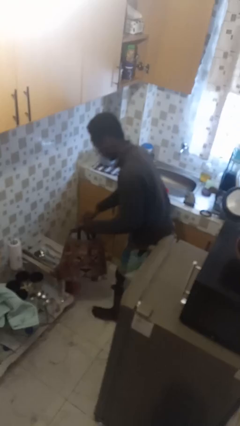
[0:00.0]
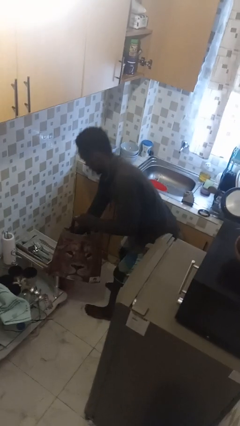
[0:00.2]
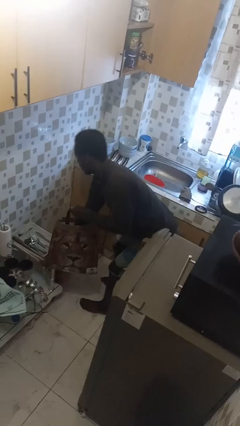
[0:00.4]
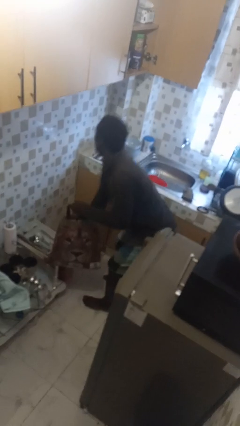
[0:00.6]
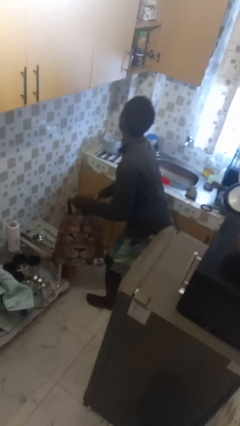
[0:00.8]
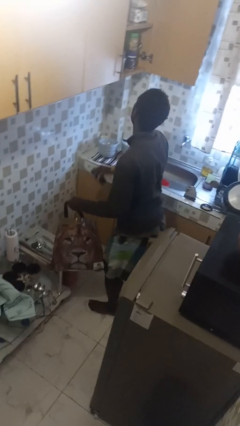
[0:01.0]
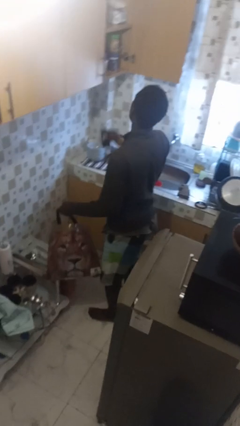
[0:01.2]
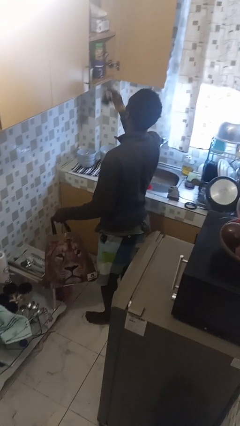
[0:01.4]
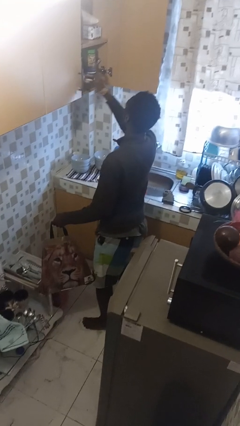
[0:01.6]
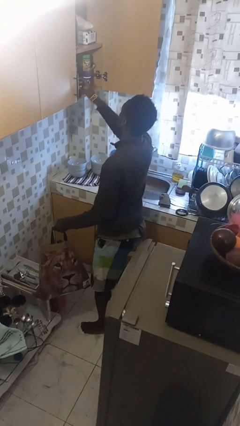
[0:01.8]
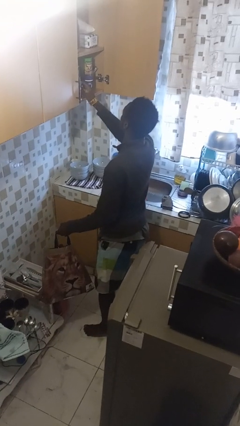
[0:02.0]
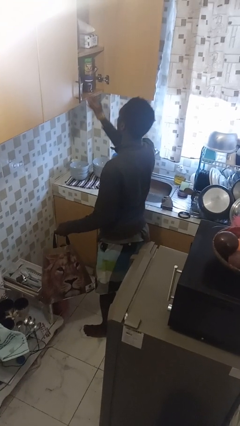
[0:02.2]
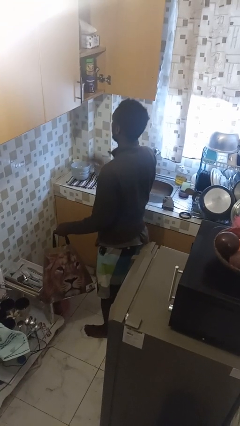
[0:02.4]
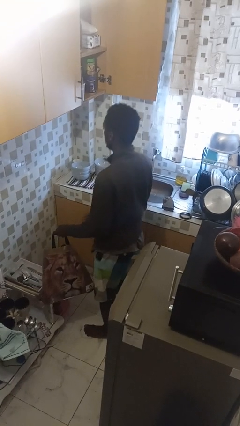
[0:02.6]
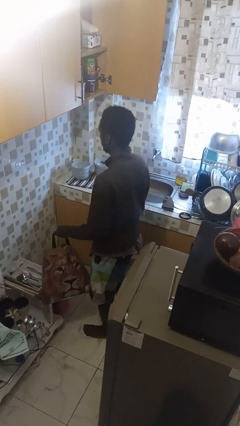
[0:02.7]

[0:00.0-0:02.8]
person loads groceries into cabinet

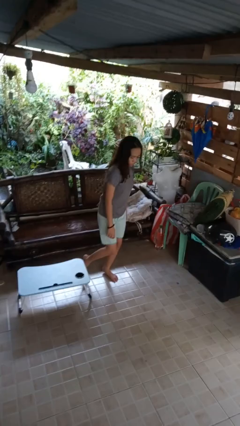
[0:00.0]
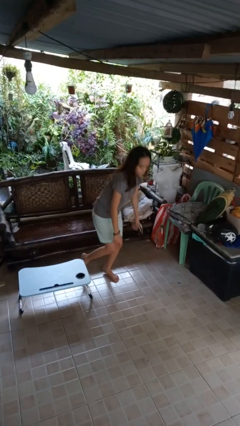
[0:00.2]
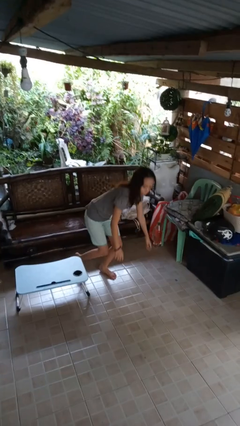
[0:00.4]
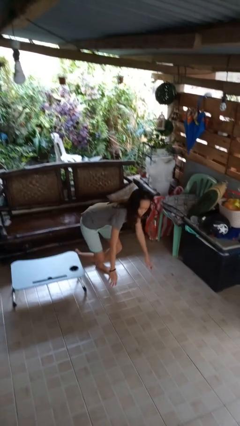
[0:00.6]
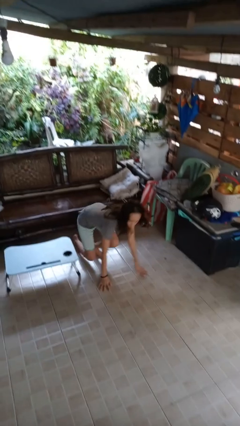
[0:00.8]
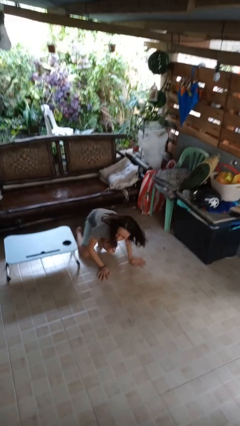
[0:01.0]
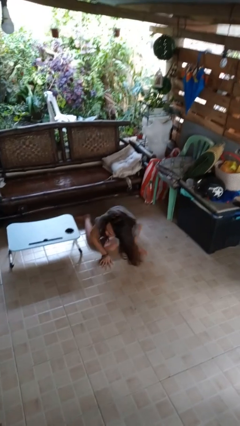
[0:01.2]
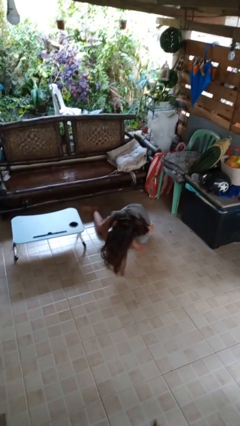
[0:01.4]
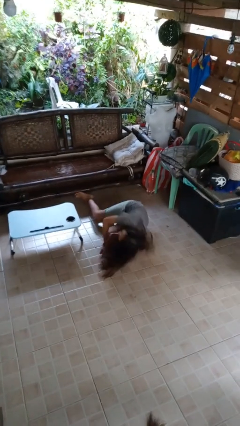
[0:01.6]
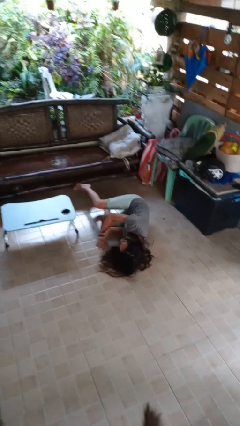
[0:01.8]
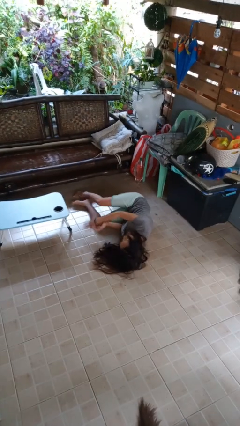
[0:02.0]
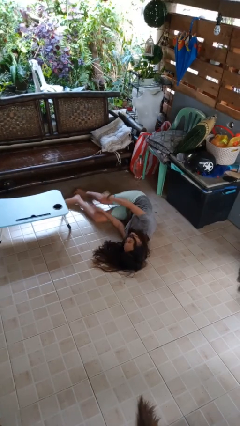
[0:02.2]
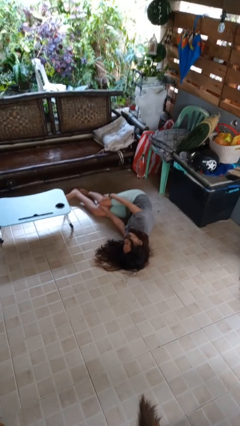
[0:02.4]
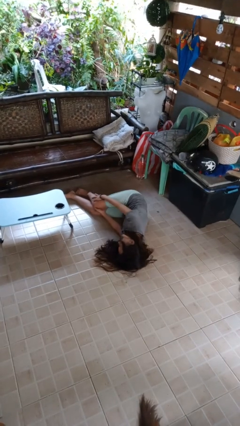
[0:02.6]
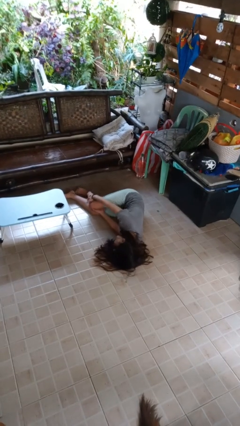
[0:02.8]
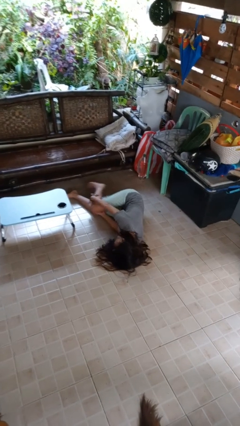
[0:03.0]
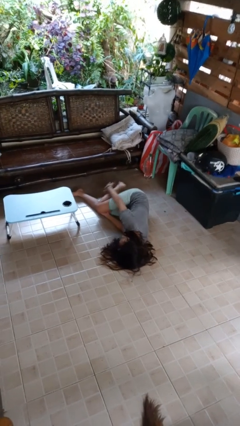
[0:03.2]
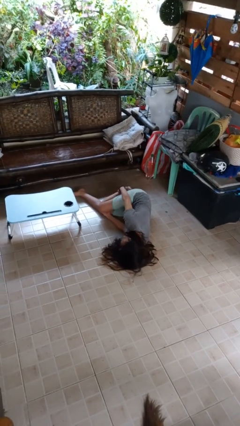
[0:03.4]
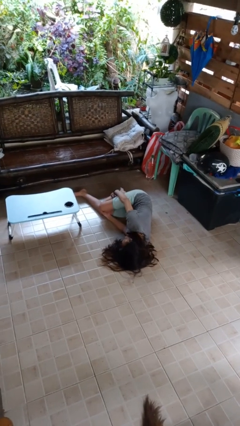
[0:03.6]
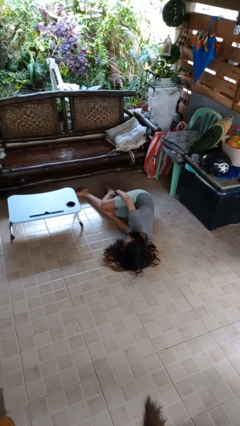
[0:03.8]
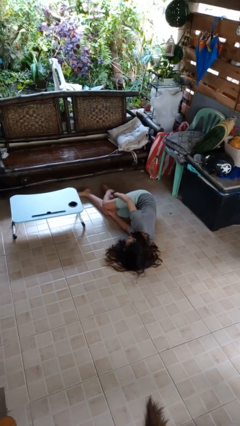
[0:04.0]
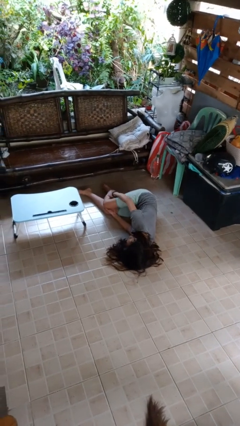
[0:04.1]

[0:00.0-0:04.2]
person lies down on floor

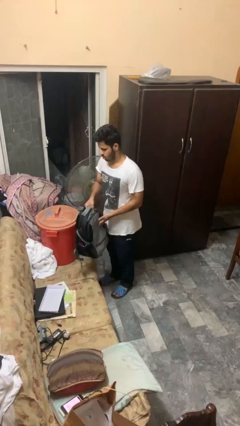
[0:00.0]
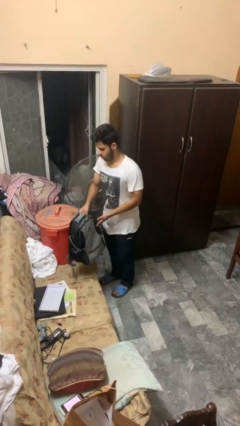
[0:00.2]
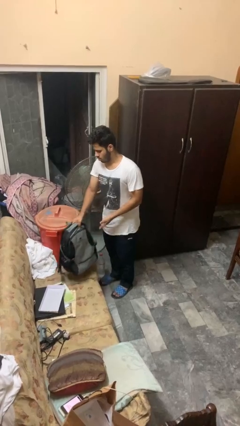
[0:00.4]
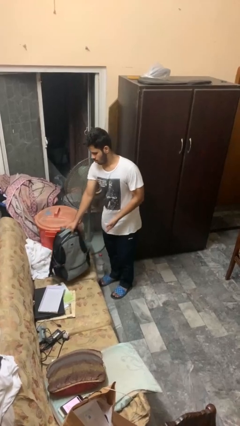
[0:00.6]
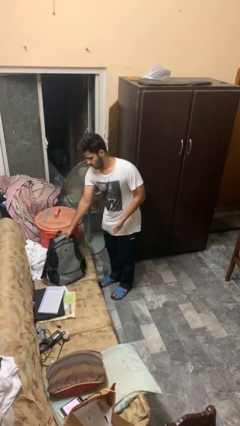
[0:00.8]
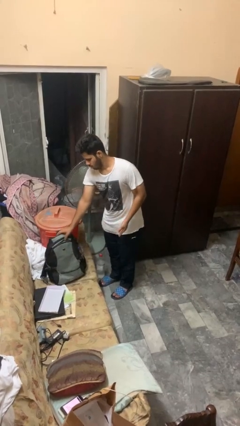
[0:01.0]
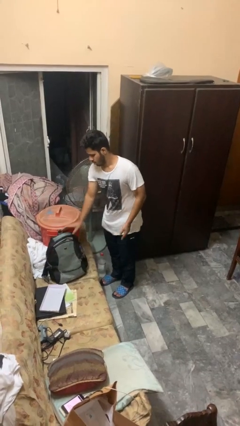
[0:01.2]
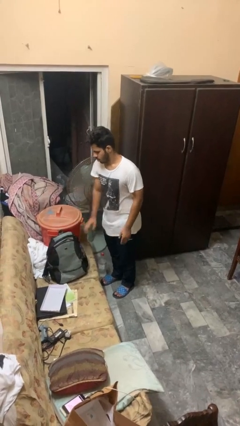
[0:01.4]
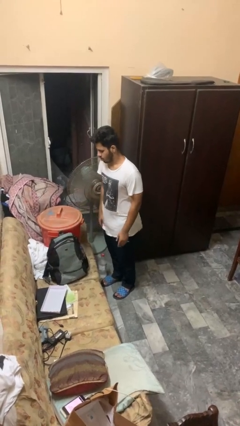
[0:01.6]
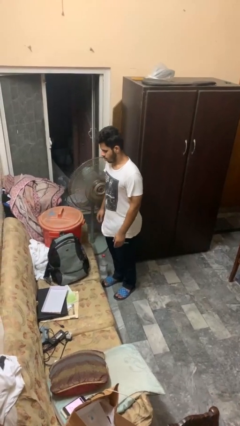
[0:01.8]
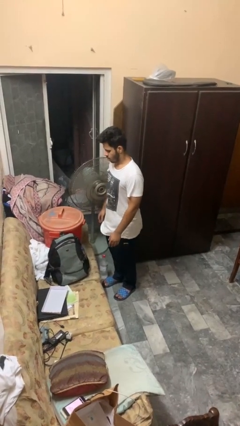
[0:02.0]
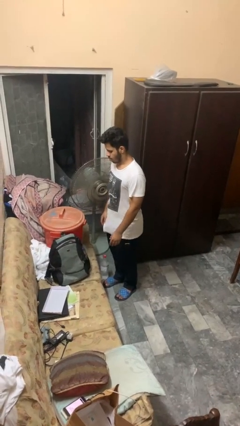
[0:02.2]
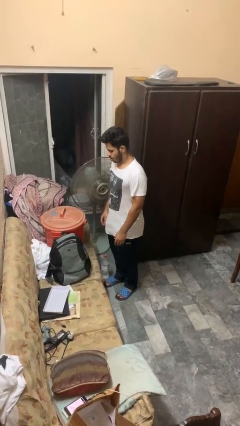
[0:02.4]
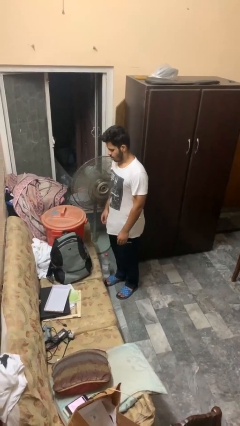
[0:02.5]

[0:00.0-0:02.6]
person puts down object on couch

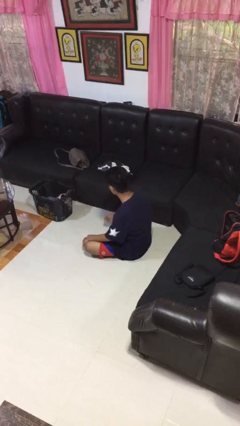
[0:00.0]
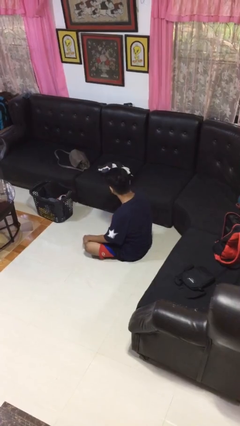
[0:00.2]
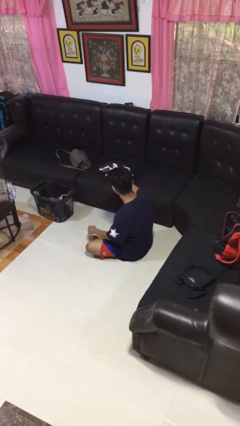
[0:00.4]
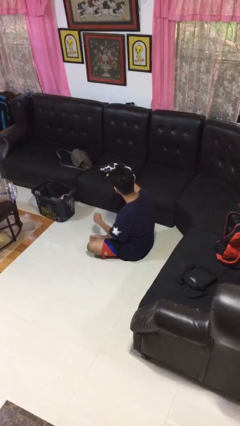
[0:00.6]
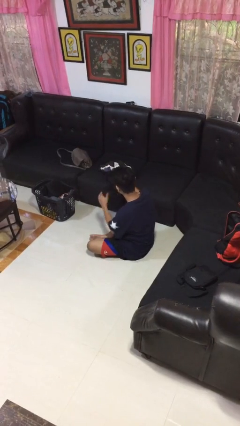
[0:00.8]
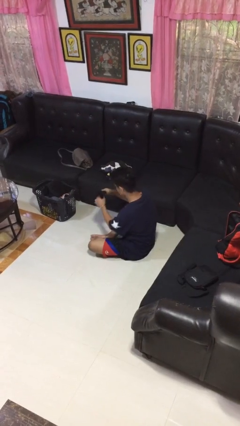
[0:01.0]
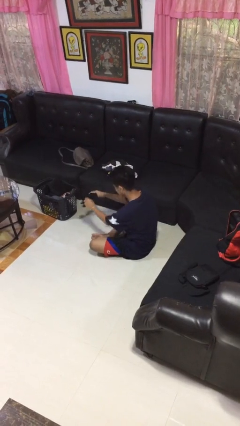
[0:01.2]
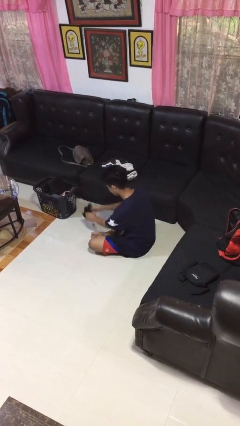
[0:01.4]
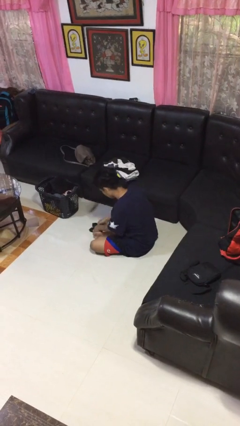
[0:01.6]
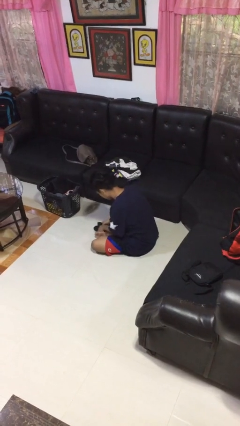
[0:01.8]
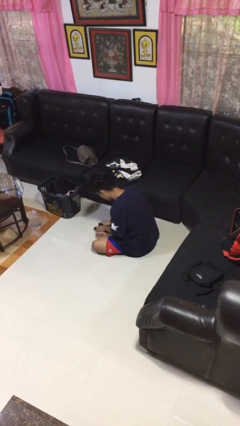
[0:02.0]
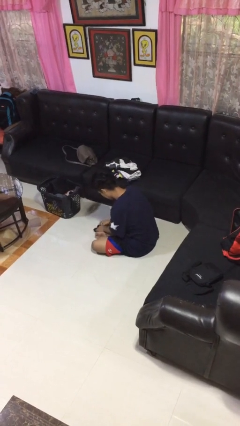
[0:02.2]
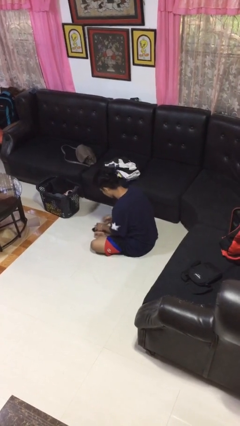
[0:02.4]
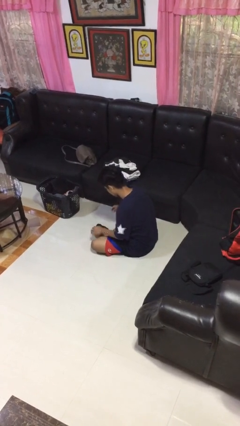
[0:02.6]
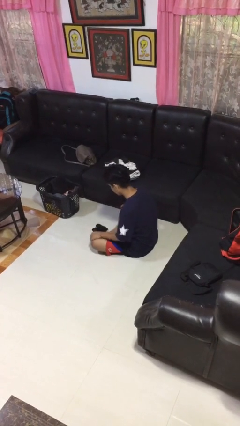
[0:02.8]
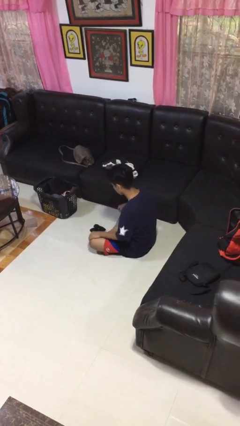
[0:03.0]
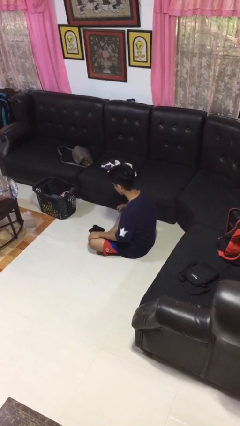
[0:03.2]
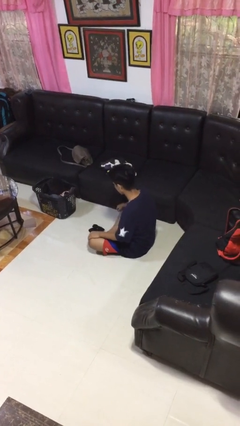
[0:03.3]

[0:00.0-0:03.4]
person folds socks

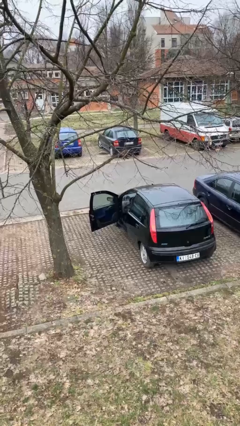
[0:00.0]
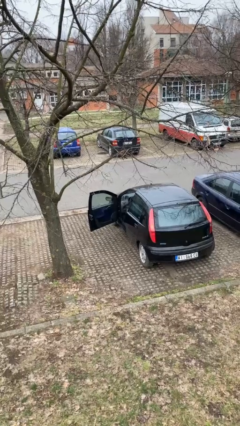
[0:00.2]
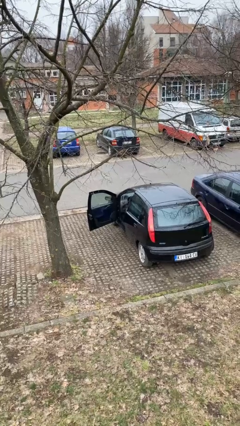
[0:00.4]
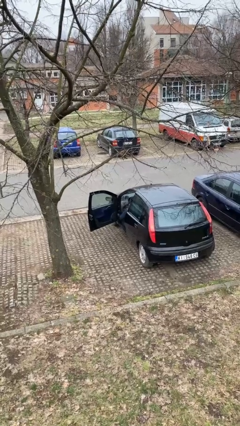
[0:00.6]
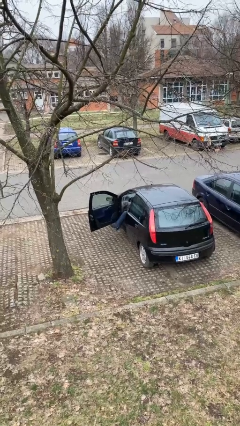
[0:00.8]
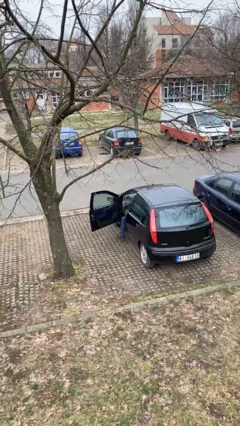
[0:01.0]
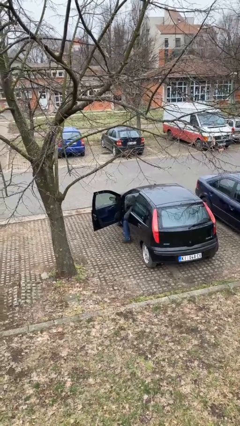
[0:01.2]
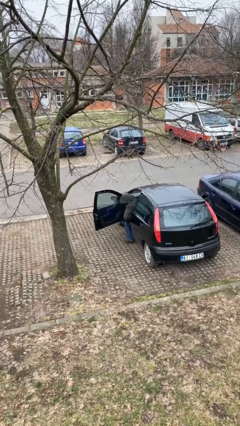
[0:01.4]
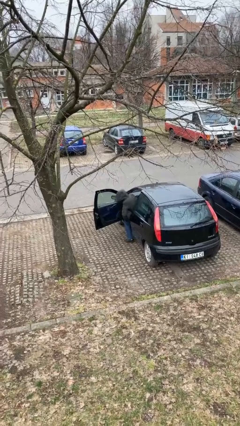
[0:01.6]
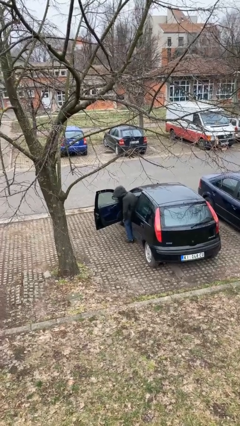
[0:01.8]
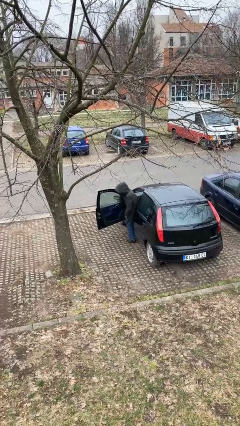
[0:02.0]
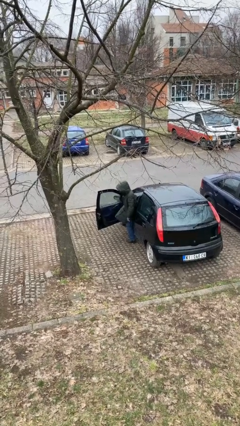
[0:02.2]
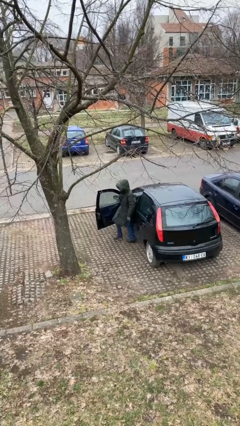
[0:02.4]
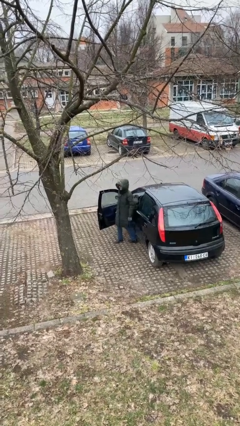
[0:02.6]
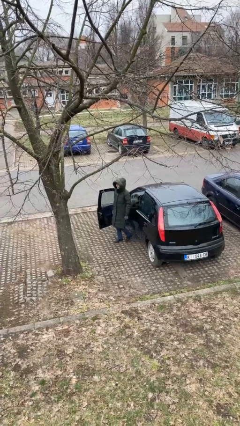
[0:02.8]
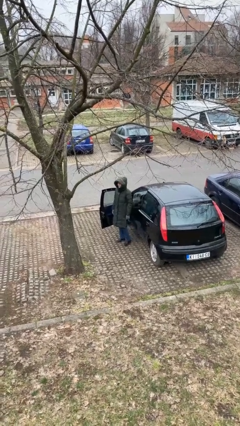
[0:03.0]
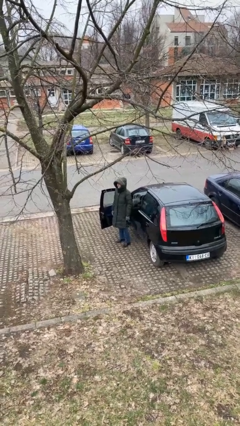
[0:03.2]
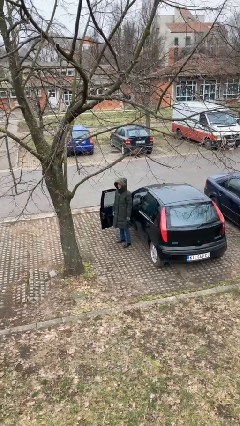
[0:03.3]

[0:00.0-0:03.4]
person exits car

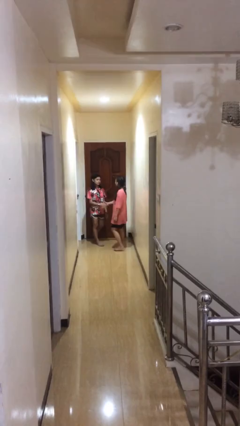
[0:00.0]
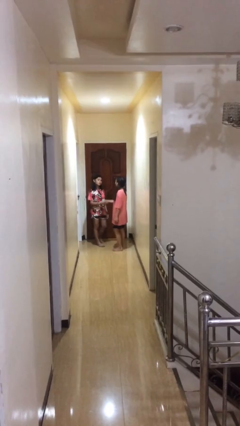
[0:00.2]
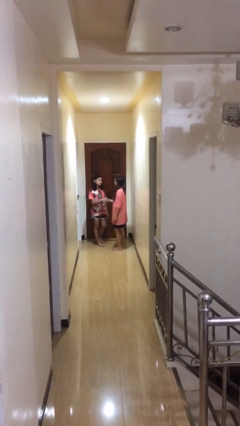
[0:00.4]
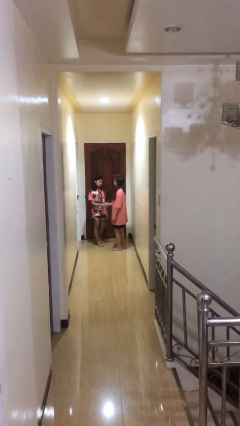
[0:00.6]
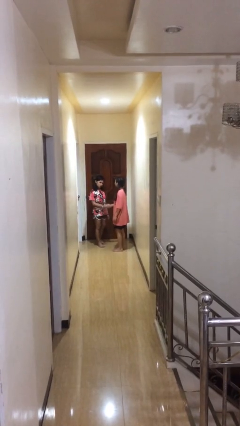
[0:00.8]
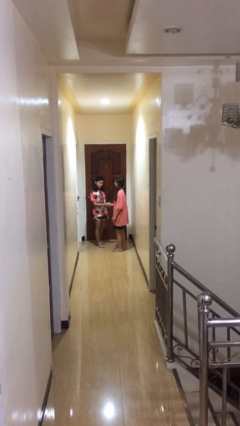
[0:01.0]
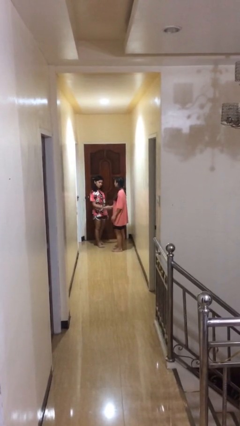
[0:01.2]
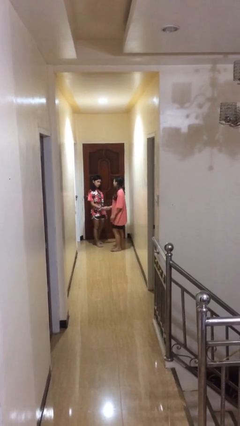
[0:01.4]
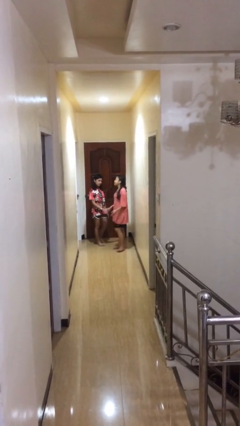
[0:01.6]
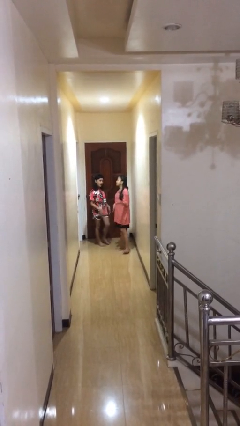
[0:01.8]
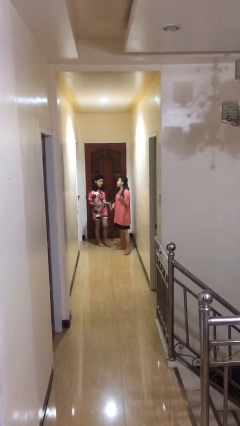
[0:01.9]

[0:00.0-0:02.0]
person shakes hand
